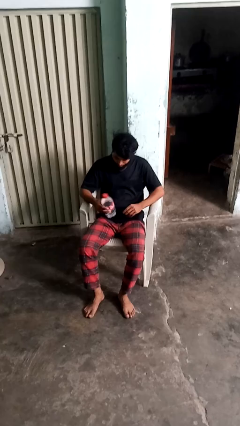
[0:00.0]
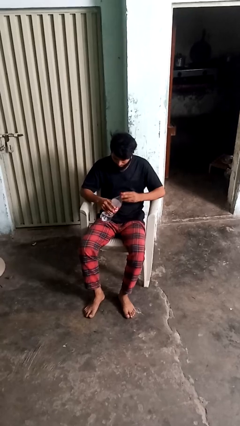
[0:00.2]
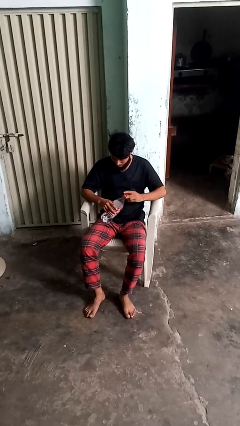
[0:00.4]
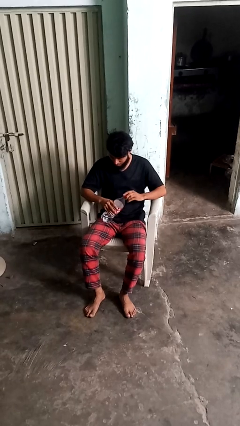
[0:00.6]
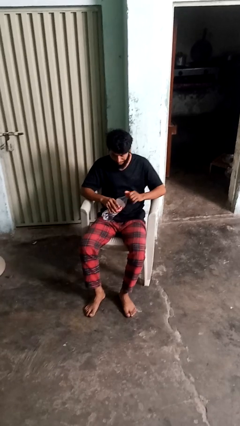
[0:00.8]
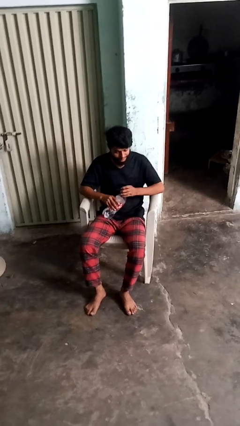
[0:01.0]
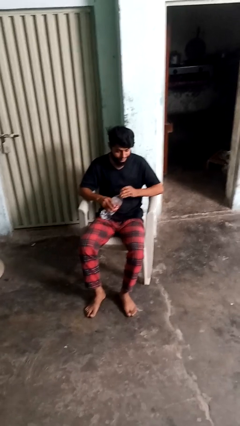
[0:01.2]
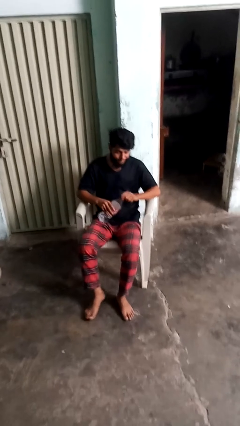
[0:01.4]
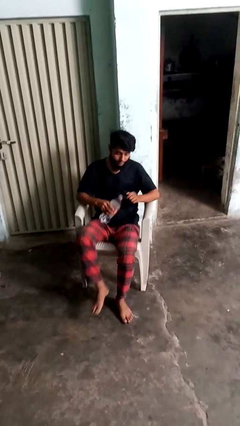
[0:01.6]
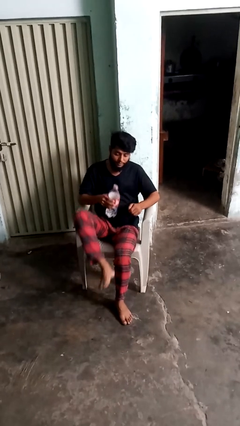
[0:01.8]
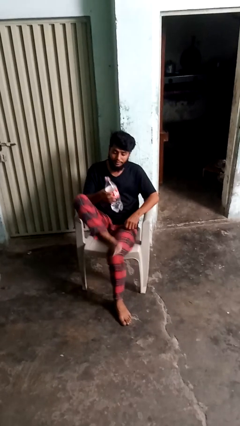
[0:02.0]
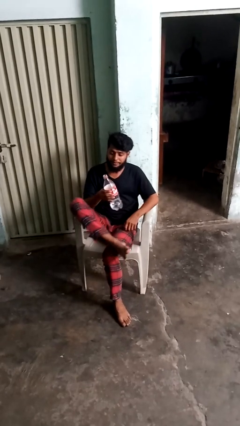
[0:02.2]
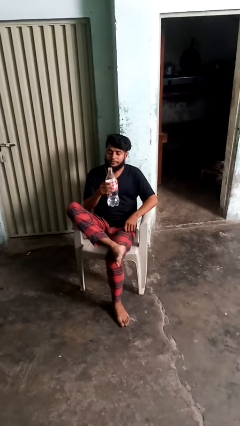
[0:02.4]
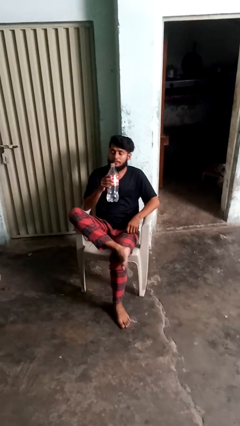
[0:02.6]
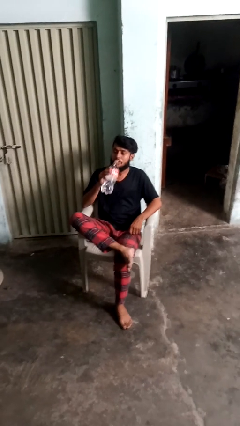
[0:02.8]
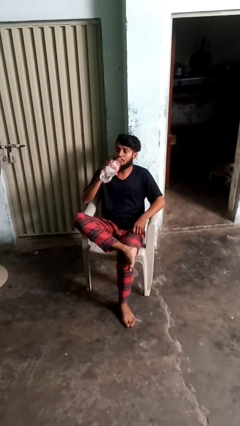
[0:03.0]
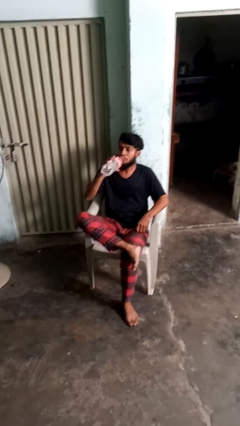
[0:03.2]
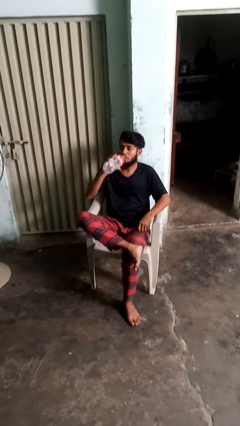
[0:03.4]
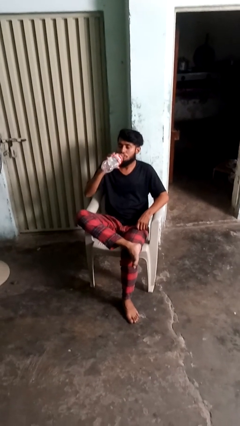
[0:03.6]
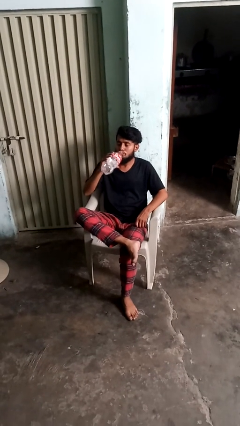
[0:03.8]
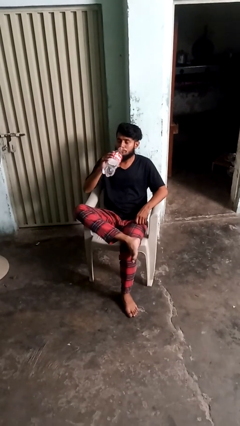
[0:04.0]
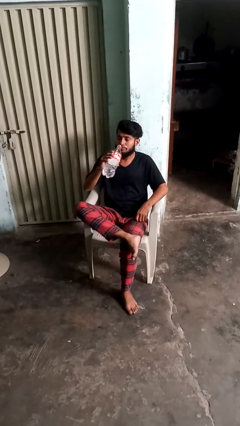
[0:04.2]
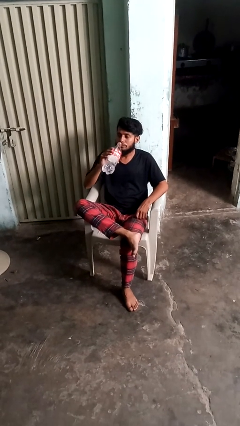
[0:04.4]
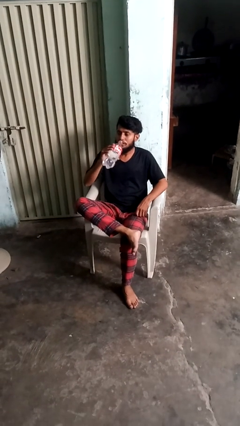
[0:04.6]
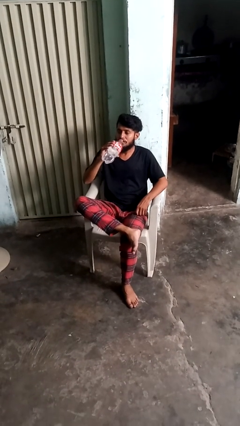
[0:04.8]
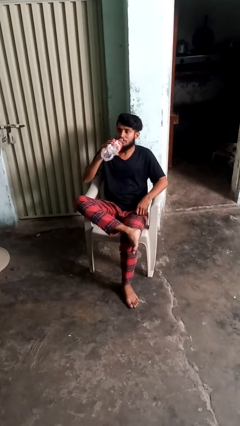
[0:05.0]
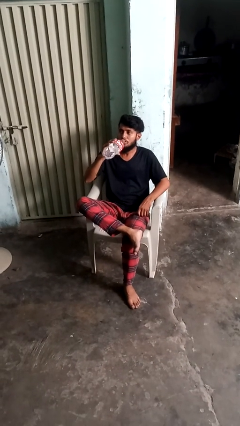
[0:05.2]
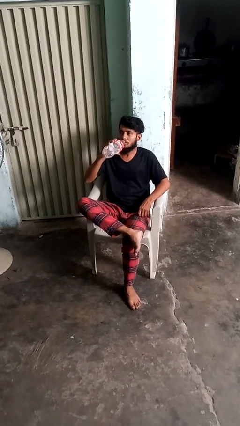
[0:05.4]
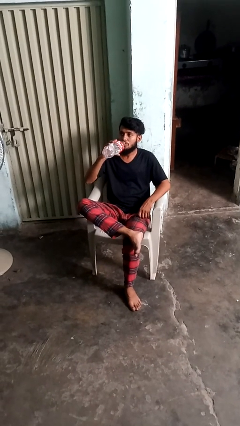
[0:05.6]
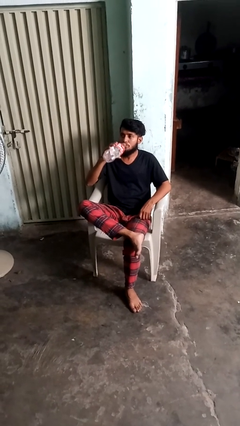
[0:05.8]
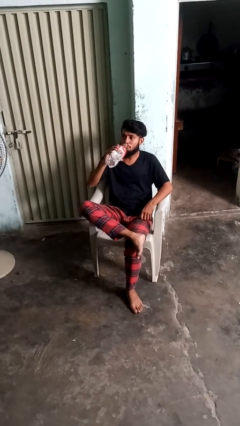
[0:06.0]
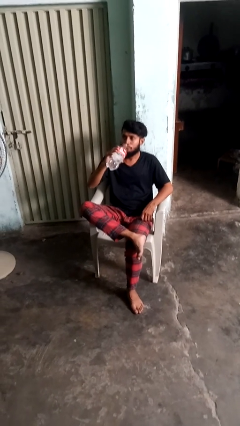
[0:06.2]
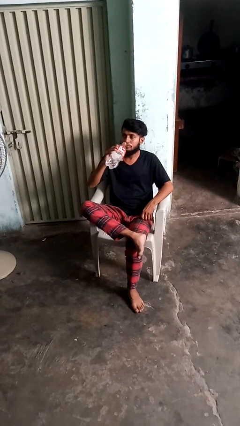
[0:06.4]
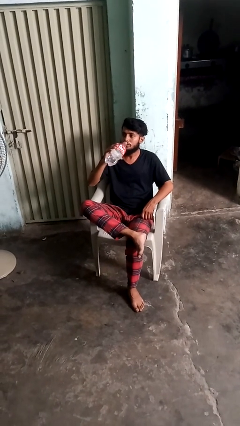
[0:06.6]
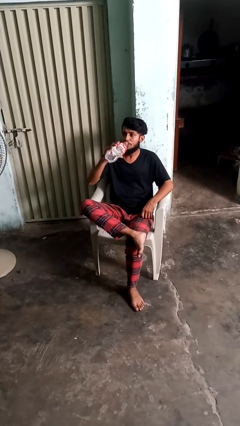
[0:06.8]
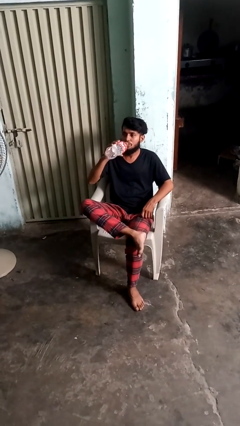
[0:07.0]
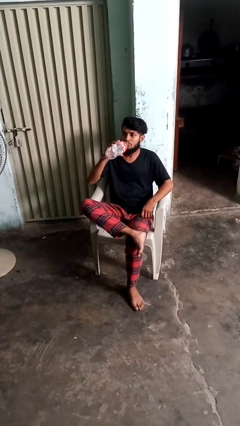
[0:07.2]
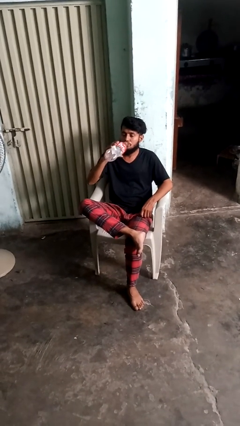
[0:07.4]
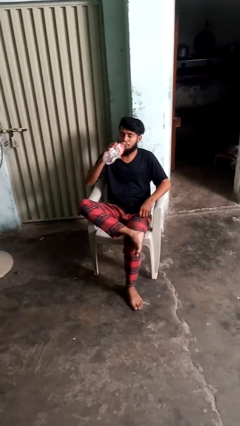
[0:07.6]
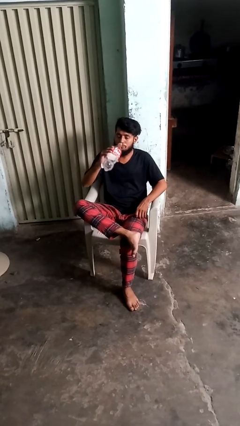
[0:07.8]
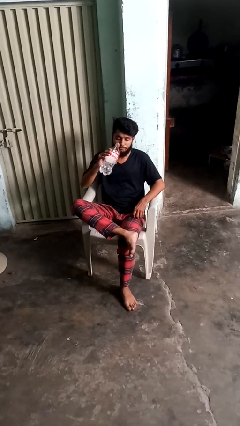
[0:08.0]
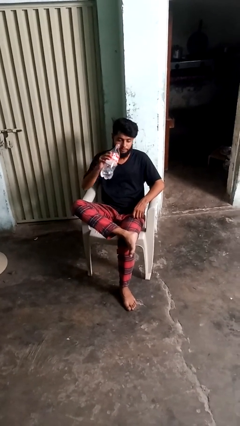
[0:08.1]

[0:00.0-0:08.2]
person drinks from bottle

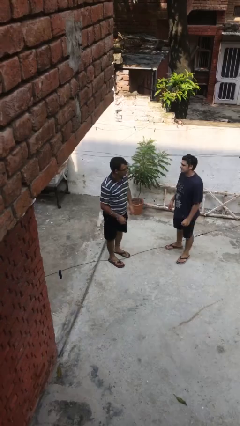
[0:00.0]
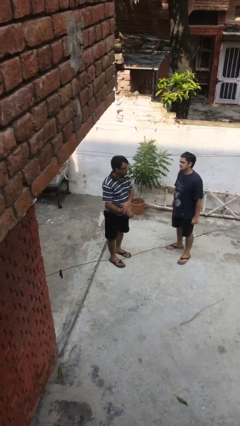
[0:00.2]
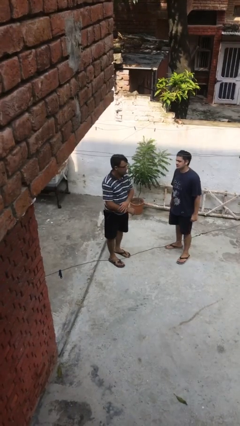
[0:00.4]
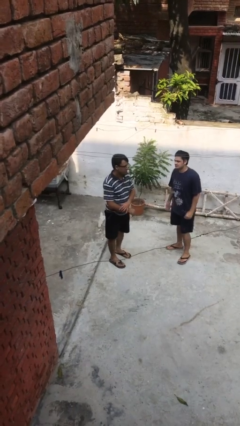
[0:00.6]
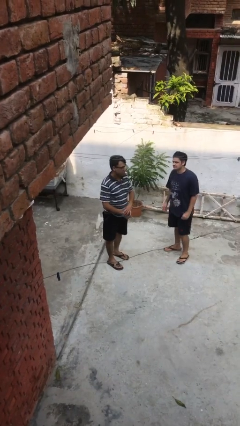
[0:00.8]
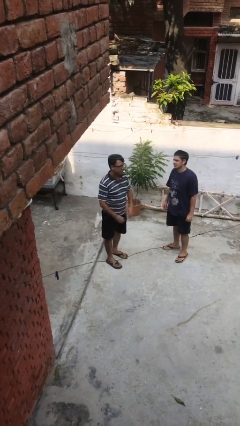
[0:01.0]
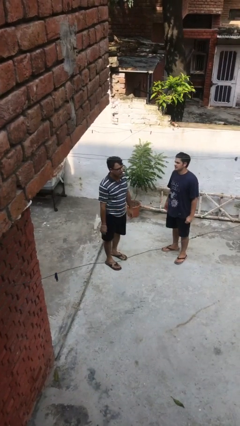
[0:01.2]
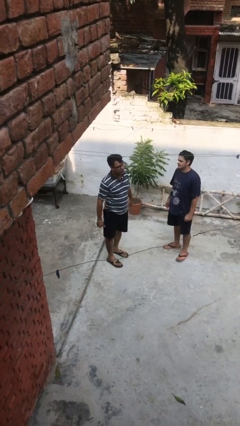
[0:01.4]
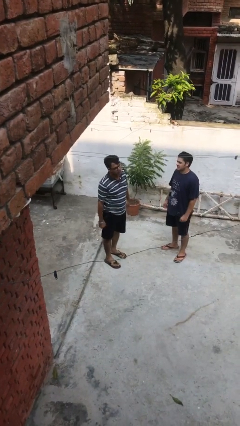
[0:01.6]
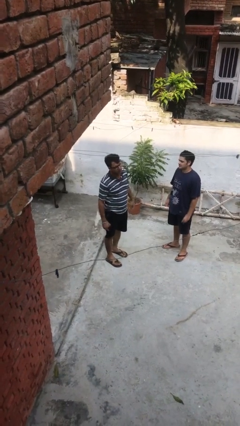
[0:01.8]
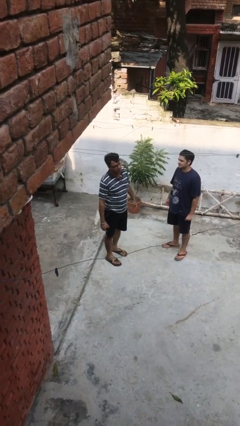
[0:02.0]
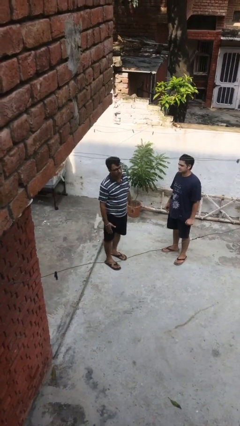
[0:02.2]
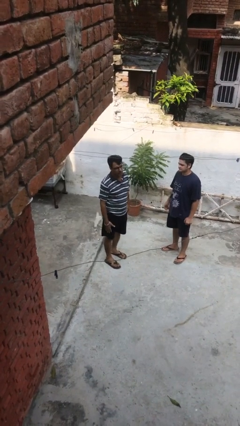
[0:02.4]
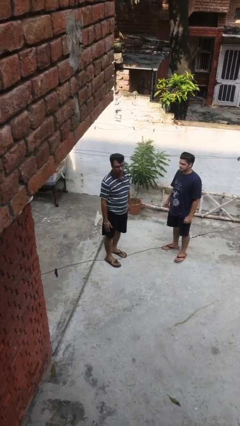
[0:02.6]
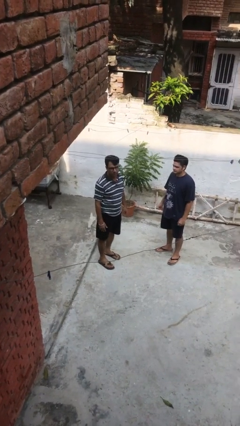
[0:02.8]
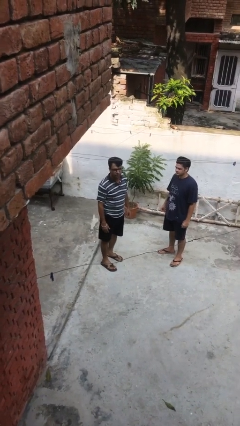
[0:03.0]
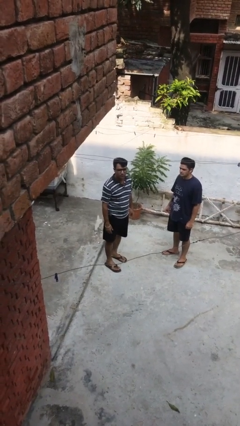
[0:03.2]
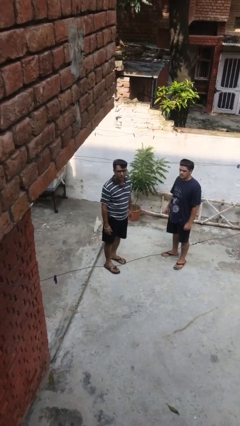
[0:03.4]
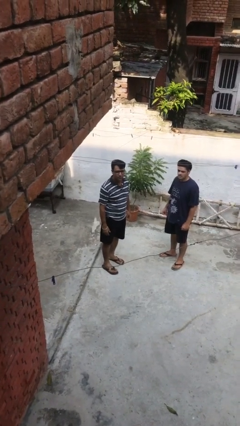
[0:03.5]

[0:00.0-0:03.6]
person talks to person

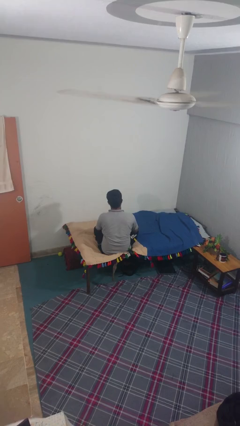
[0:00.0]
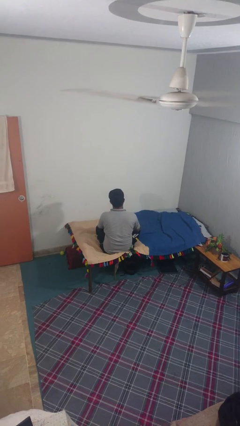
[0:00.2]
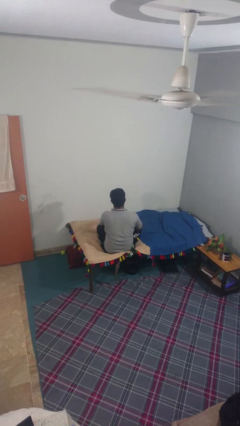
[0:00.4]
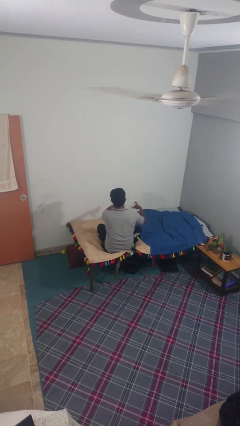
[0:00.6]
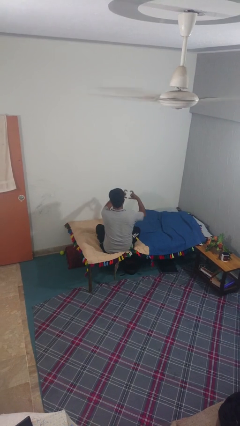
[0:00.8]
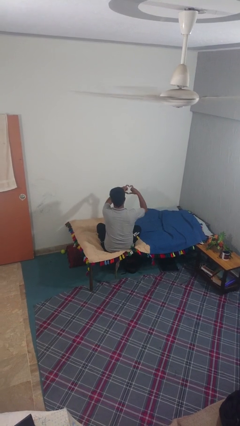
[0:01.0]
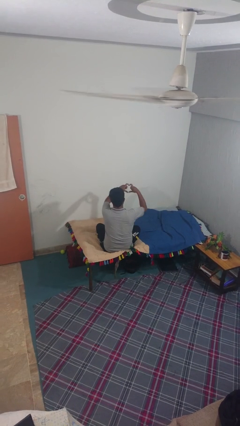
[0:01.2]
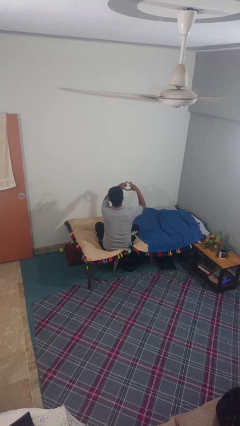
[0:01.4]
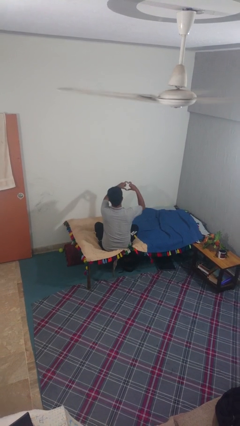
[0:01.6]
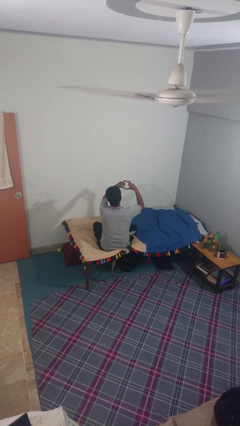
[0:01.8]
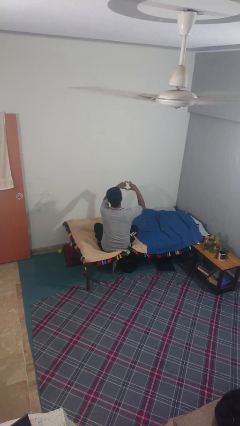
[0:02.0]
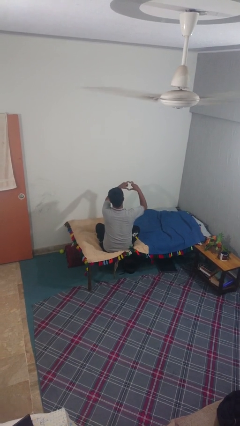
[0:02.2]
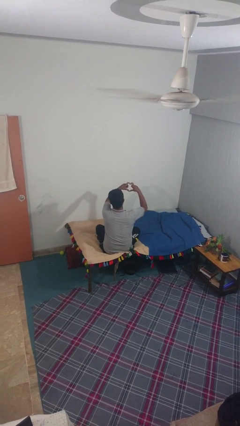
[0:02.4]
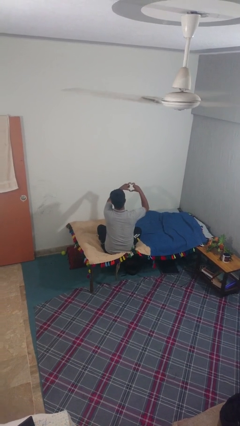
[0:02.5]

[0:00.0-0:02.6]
person gestures heart

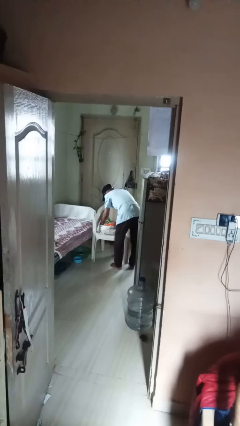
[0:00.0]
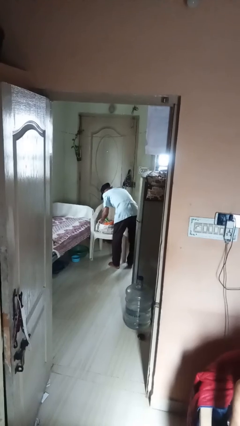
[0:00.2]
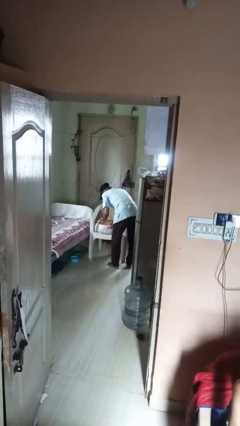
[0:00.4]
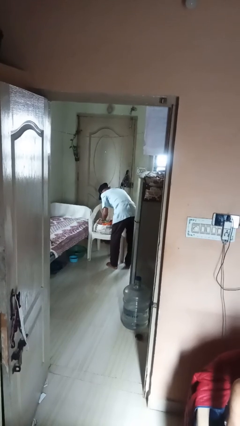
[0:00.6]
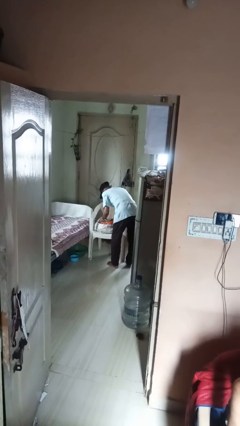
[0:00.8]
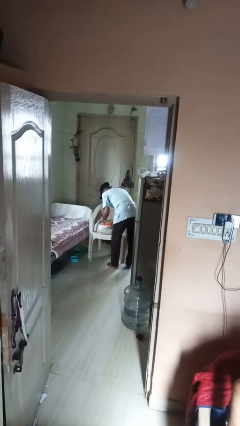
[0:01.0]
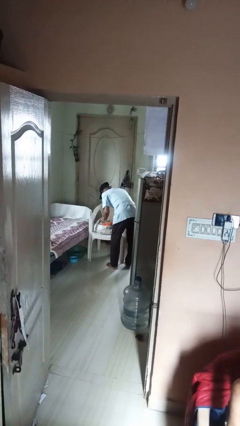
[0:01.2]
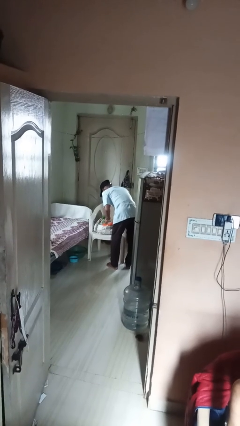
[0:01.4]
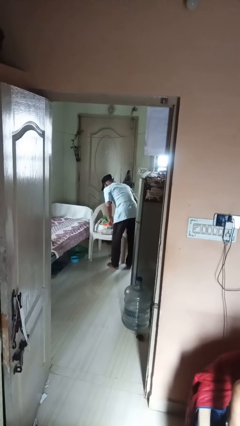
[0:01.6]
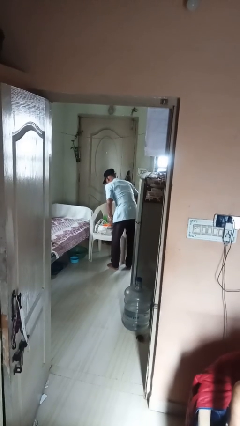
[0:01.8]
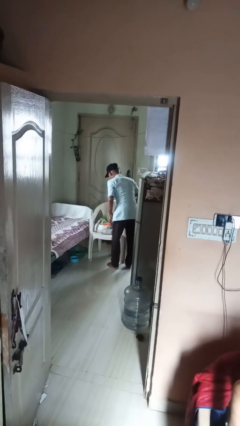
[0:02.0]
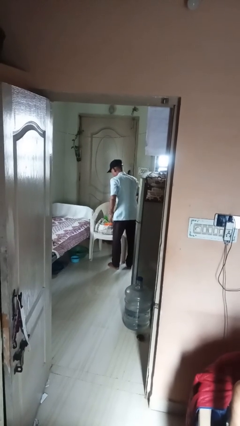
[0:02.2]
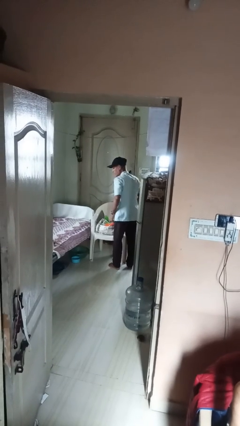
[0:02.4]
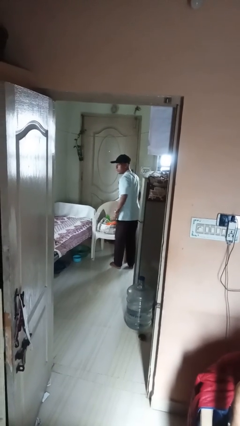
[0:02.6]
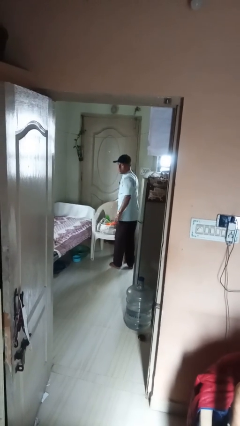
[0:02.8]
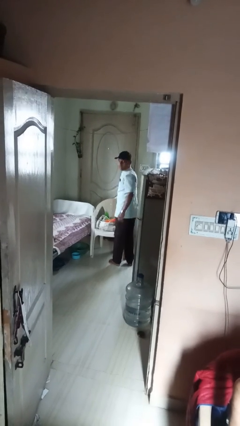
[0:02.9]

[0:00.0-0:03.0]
person searches in bag

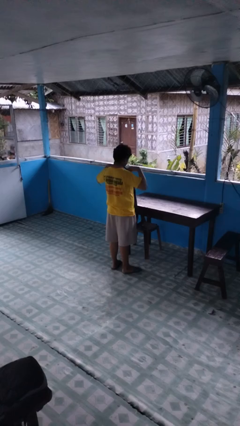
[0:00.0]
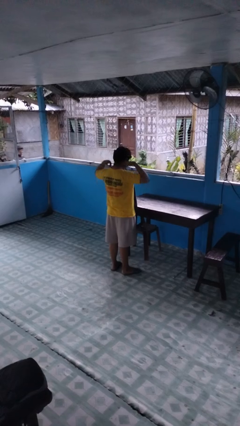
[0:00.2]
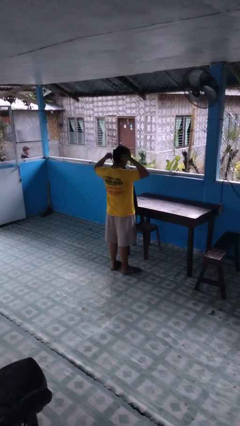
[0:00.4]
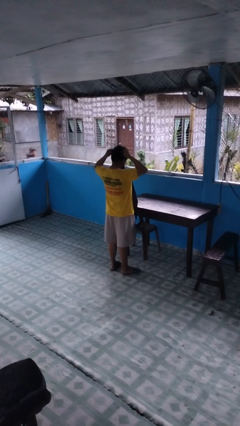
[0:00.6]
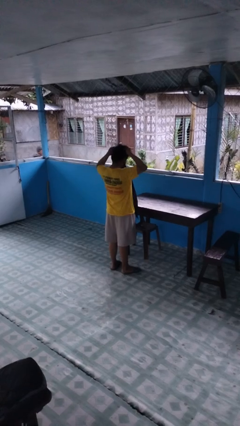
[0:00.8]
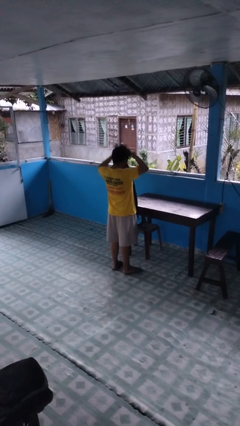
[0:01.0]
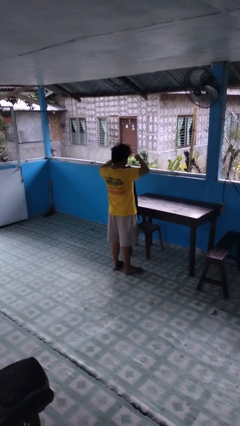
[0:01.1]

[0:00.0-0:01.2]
person takes off apron
